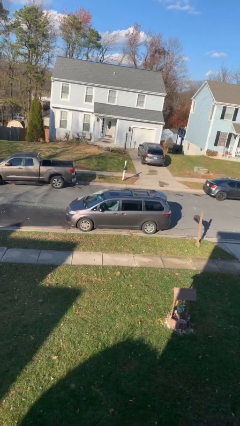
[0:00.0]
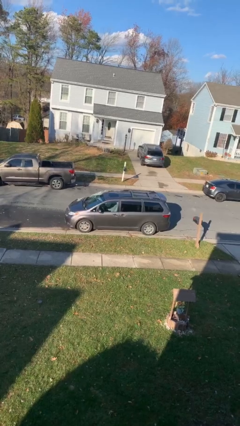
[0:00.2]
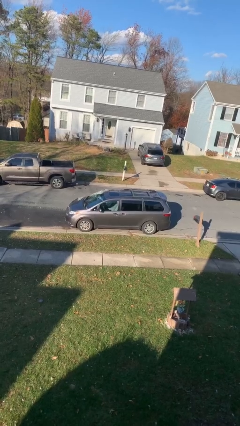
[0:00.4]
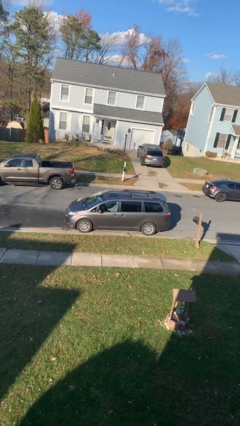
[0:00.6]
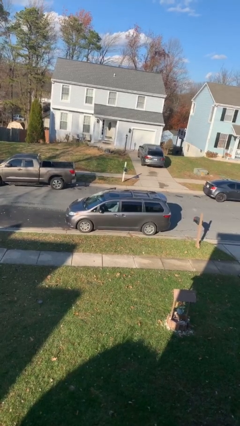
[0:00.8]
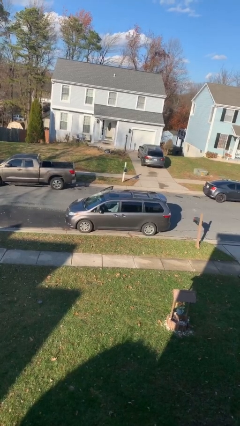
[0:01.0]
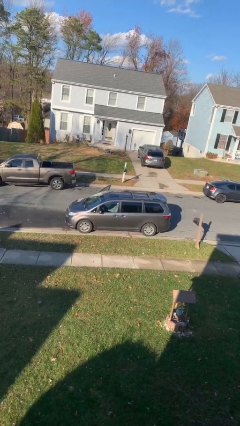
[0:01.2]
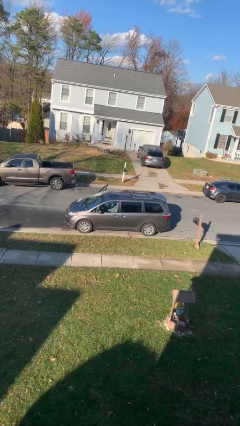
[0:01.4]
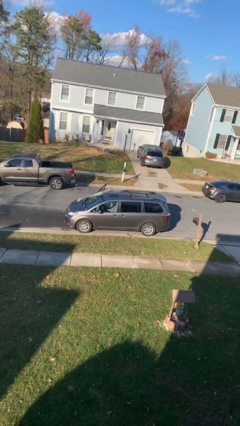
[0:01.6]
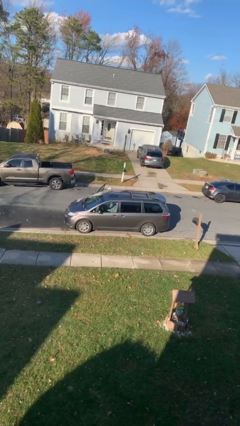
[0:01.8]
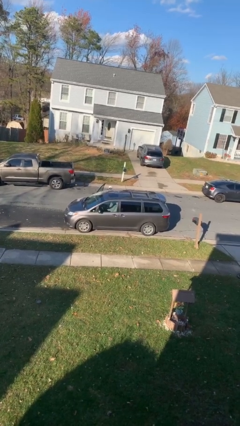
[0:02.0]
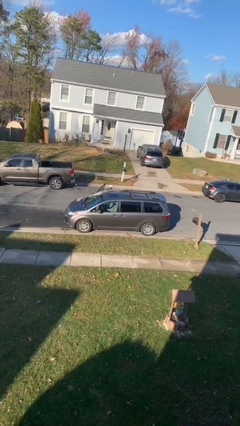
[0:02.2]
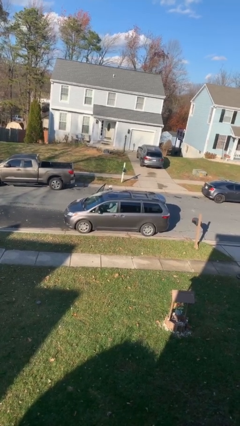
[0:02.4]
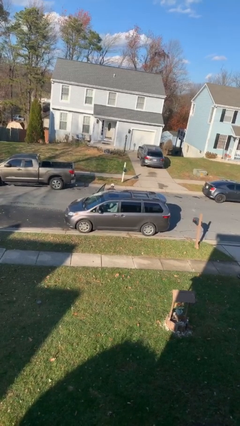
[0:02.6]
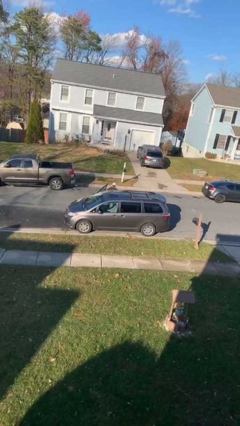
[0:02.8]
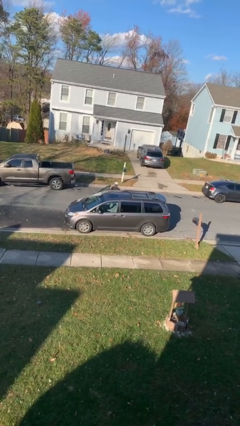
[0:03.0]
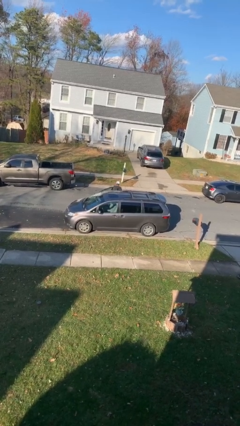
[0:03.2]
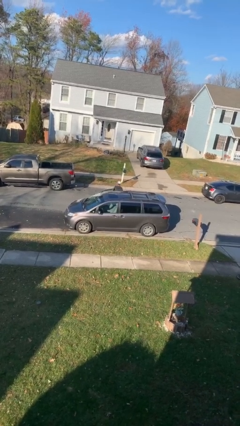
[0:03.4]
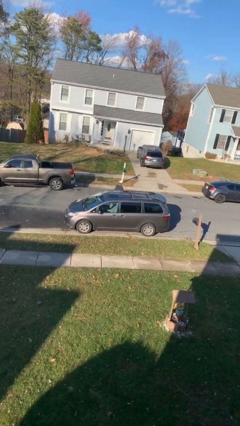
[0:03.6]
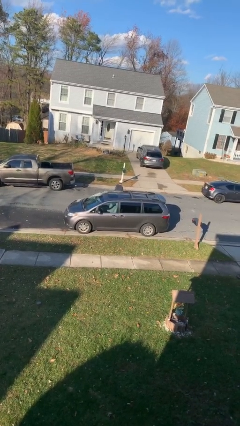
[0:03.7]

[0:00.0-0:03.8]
car drops off person

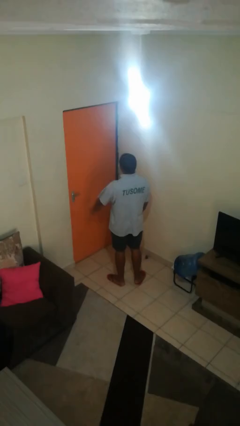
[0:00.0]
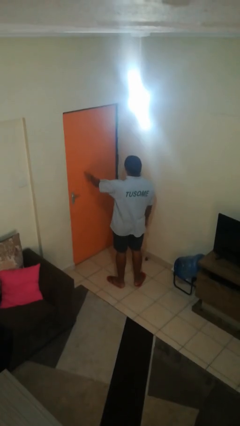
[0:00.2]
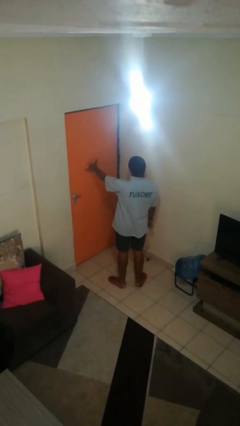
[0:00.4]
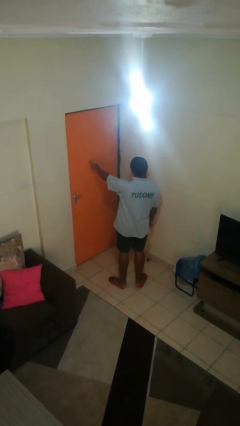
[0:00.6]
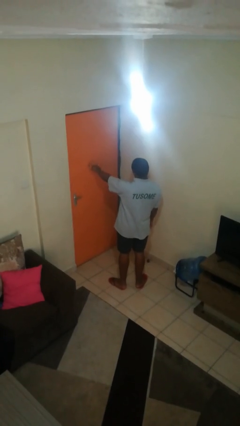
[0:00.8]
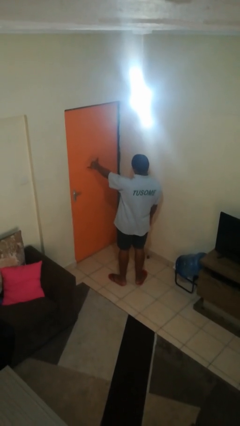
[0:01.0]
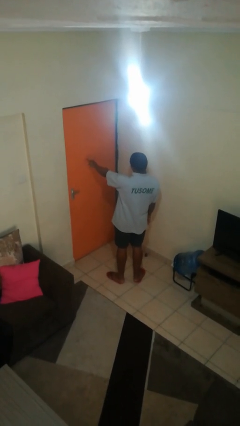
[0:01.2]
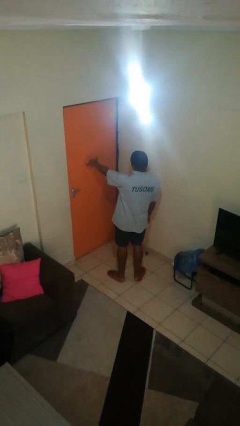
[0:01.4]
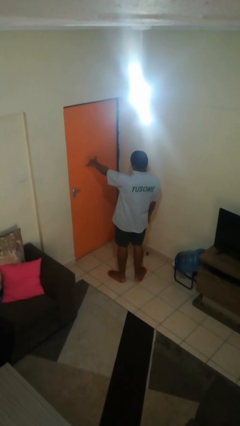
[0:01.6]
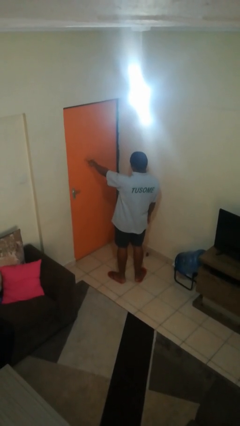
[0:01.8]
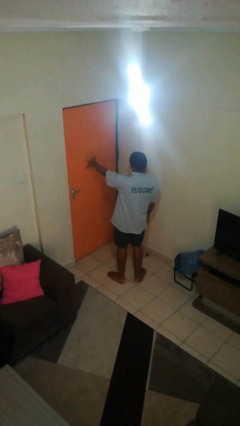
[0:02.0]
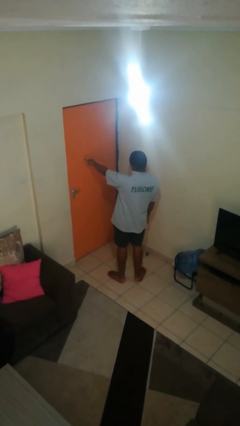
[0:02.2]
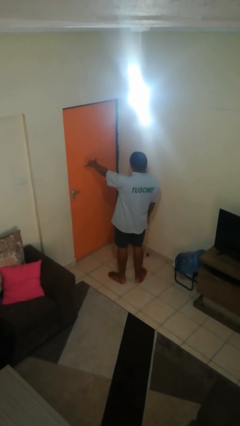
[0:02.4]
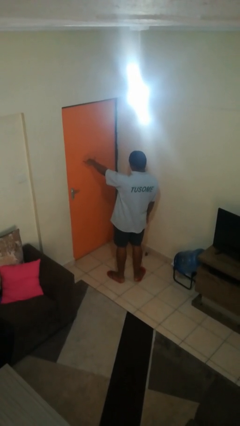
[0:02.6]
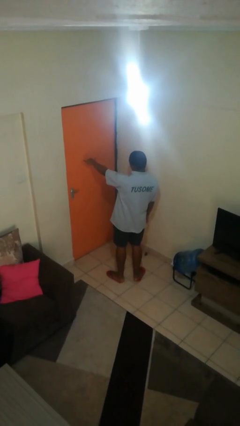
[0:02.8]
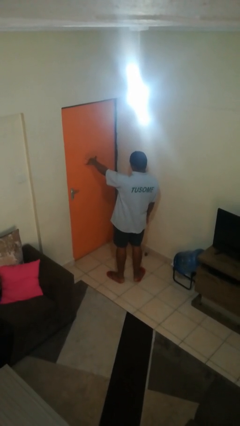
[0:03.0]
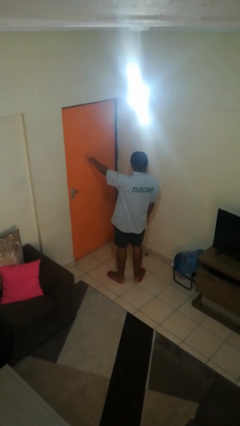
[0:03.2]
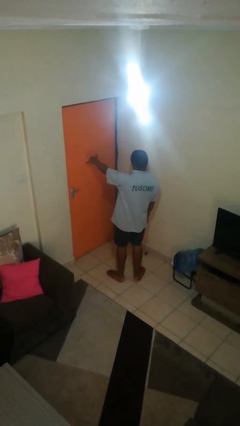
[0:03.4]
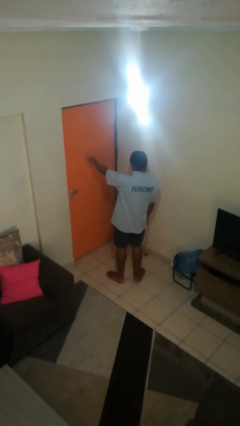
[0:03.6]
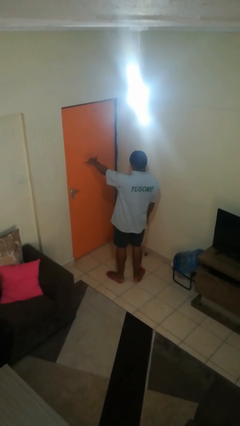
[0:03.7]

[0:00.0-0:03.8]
person gestures hang loose

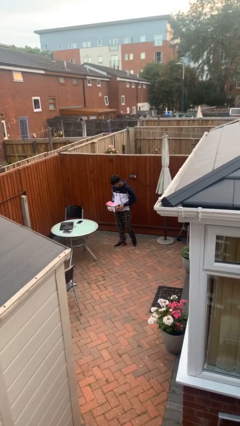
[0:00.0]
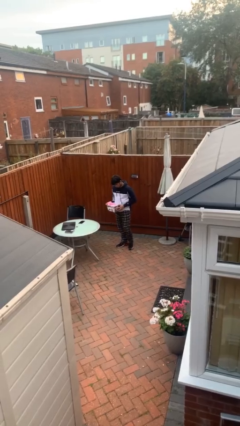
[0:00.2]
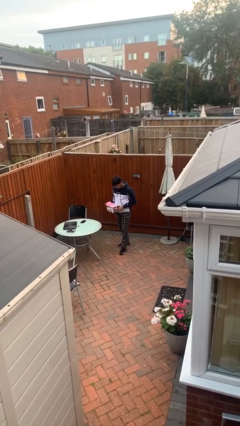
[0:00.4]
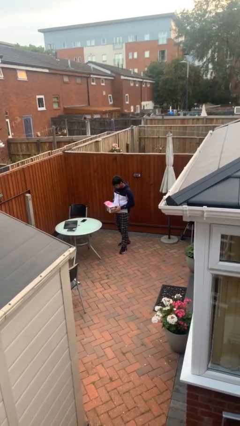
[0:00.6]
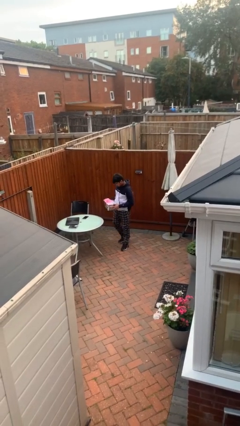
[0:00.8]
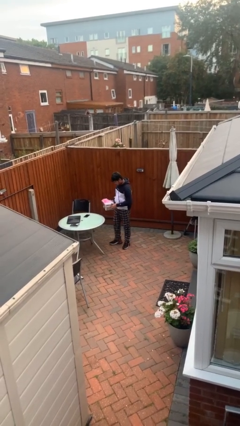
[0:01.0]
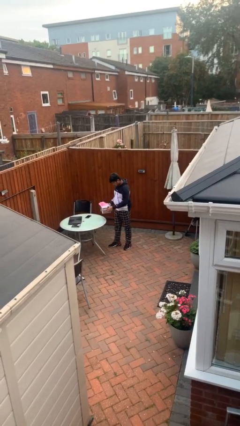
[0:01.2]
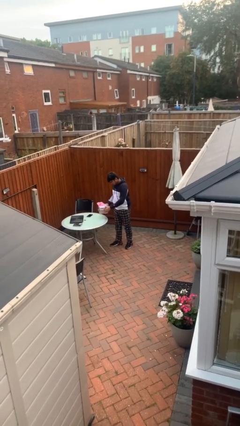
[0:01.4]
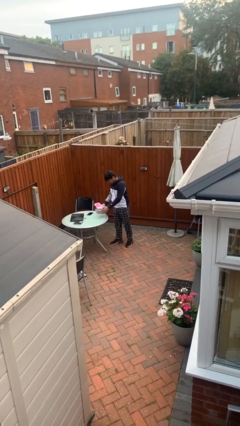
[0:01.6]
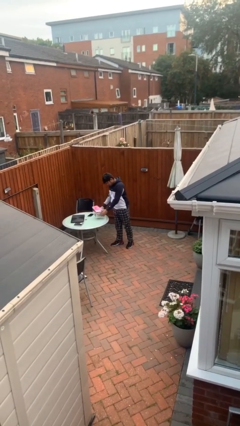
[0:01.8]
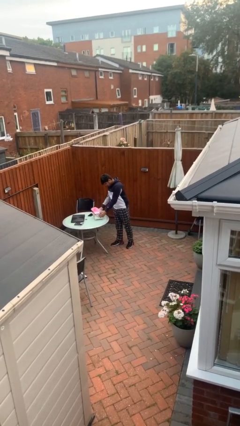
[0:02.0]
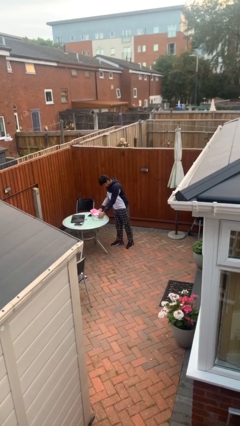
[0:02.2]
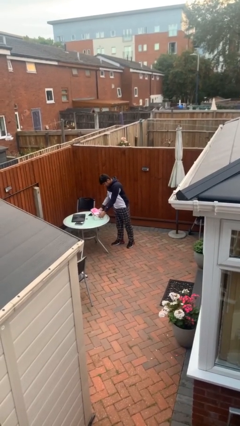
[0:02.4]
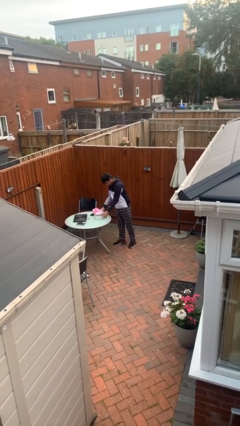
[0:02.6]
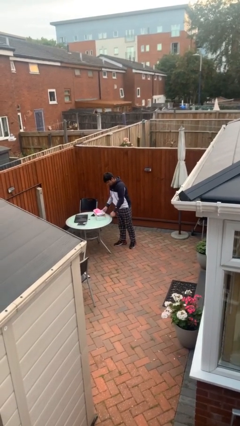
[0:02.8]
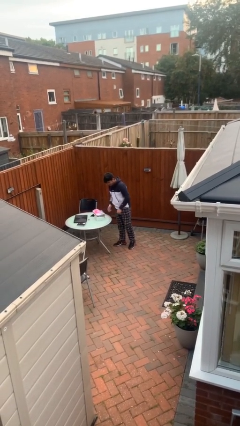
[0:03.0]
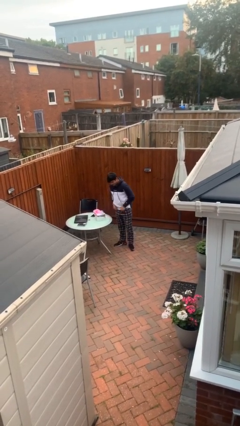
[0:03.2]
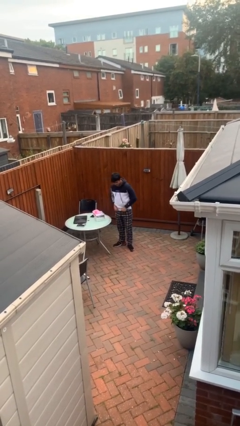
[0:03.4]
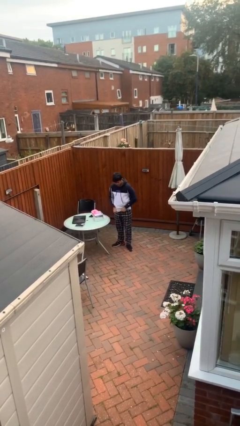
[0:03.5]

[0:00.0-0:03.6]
person puts down object on table

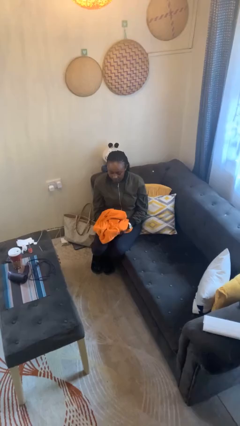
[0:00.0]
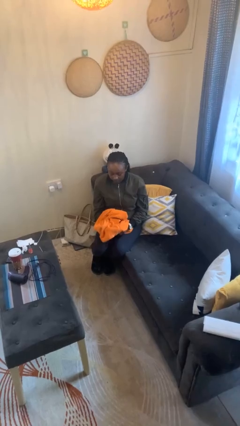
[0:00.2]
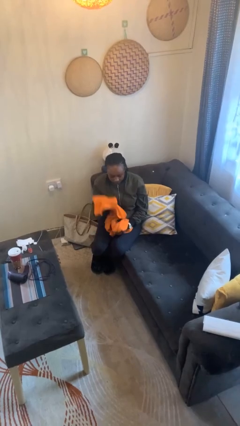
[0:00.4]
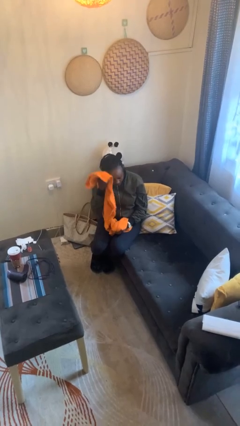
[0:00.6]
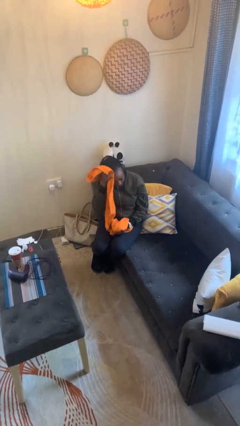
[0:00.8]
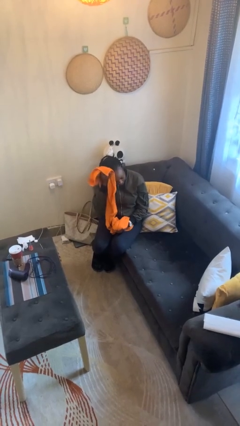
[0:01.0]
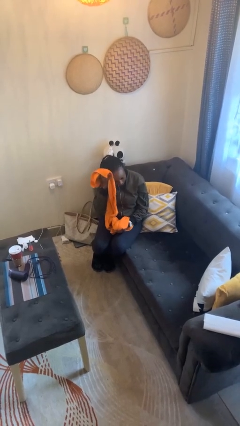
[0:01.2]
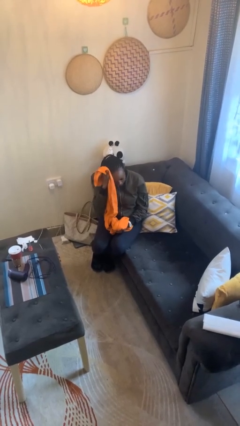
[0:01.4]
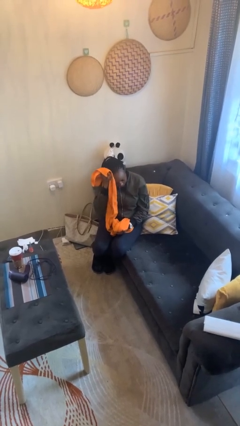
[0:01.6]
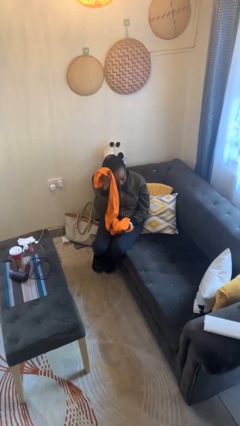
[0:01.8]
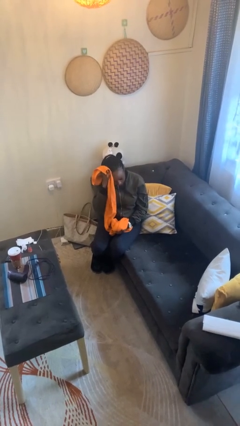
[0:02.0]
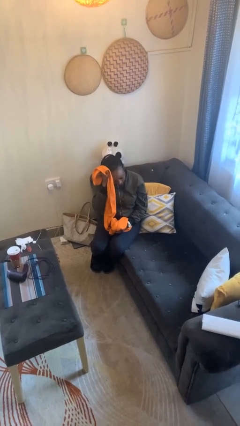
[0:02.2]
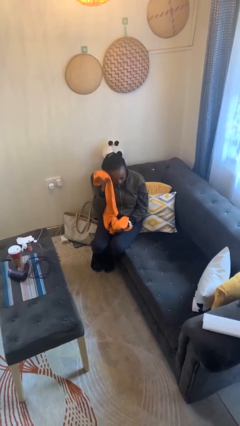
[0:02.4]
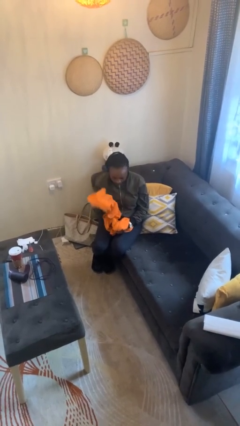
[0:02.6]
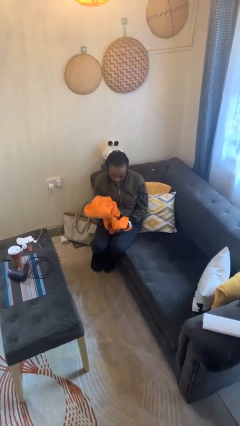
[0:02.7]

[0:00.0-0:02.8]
person dries hair with towel

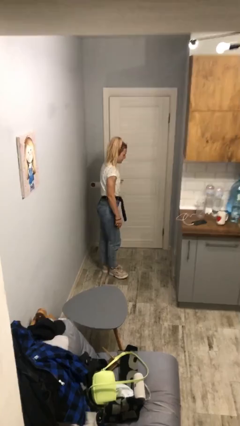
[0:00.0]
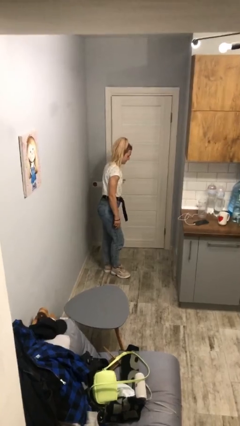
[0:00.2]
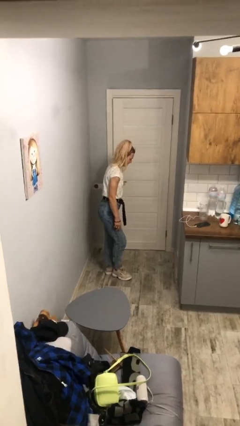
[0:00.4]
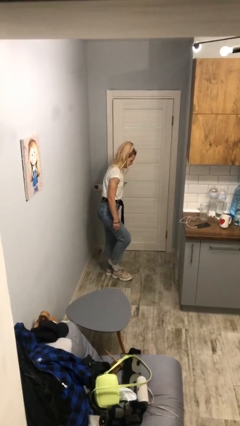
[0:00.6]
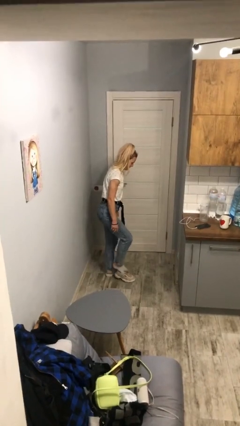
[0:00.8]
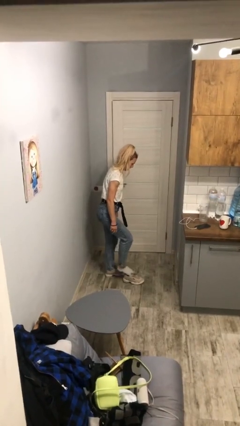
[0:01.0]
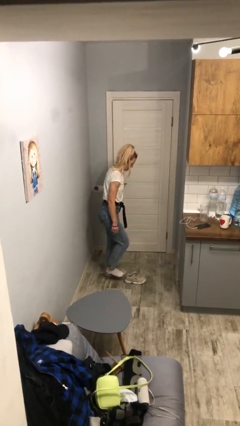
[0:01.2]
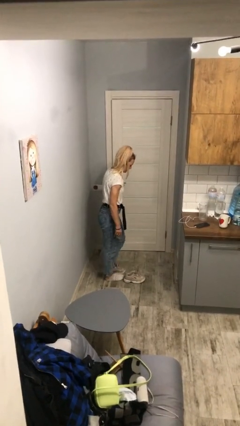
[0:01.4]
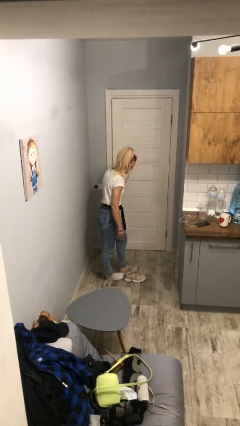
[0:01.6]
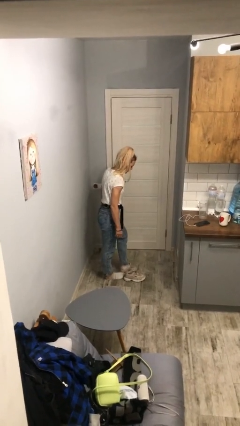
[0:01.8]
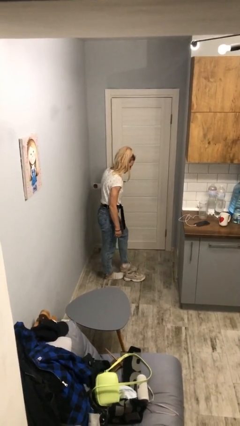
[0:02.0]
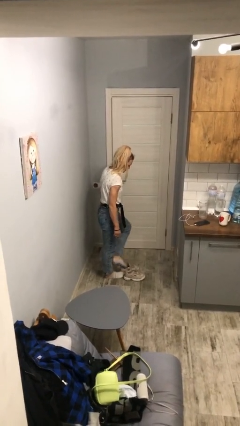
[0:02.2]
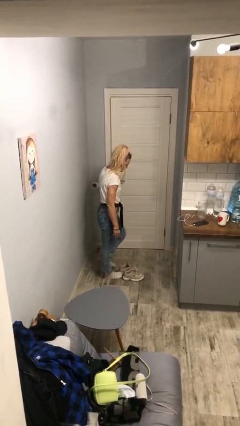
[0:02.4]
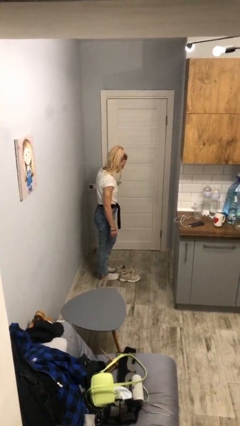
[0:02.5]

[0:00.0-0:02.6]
person takes off shoes

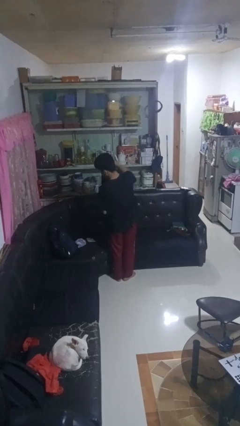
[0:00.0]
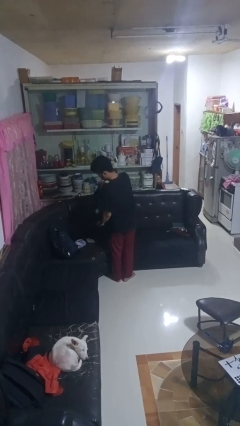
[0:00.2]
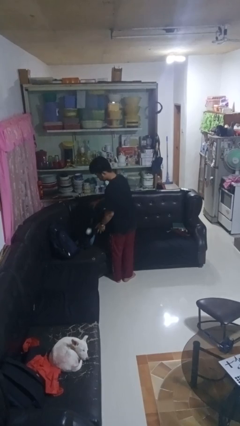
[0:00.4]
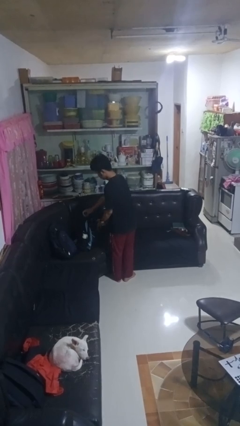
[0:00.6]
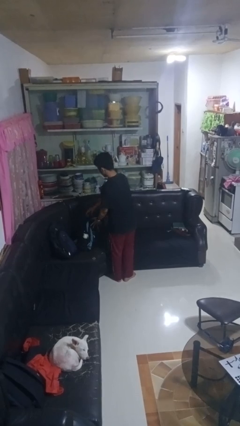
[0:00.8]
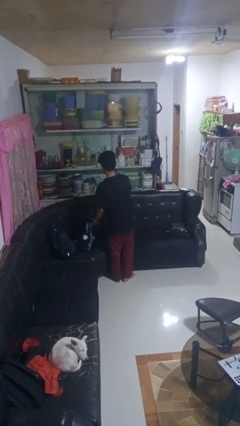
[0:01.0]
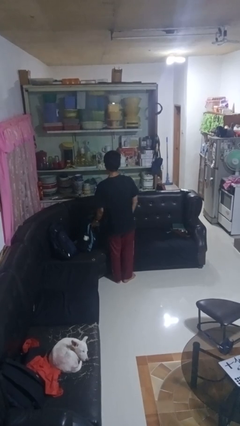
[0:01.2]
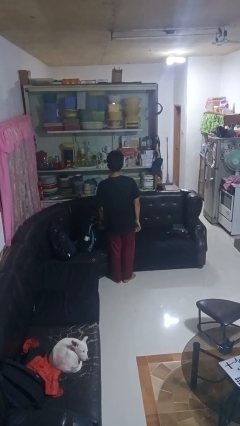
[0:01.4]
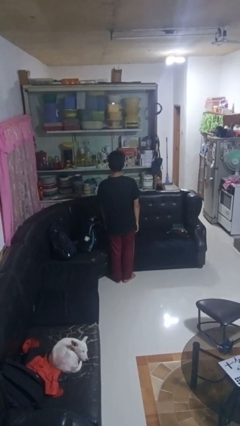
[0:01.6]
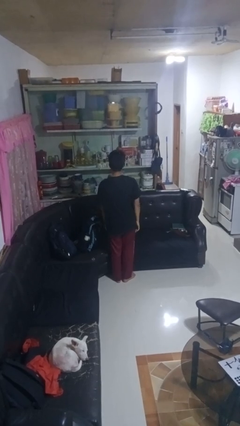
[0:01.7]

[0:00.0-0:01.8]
person puts down object on couch
